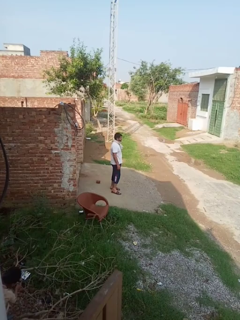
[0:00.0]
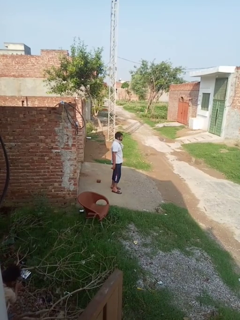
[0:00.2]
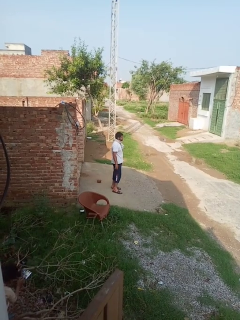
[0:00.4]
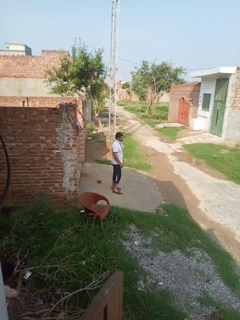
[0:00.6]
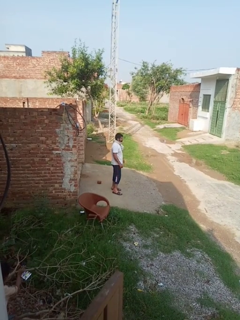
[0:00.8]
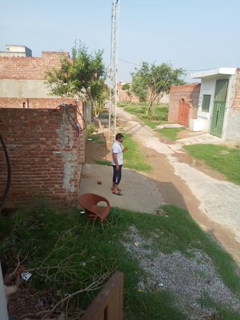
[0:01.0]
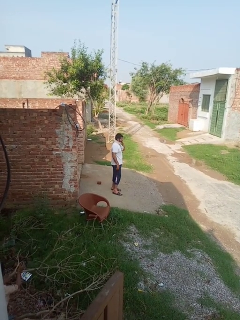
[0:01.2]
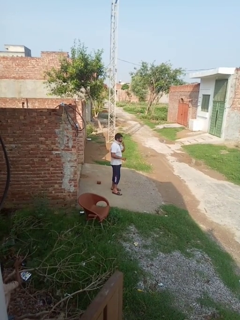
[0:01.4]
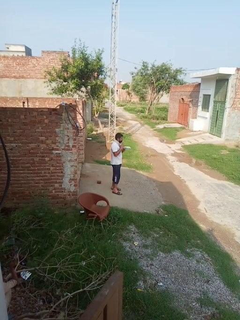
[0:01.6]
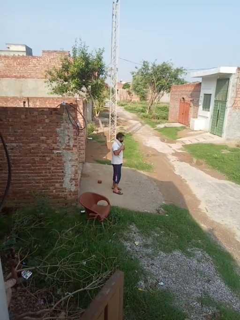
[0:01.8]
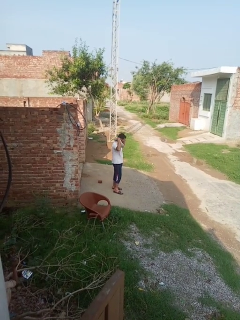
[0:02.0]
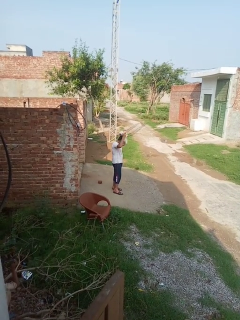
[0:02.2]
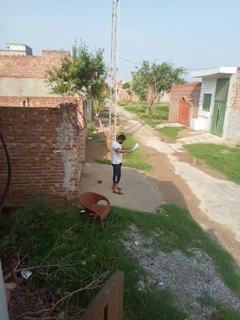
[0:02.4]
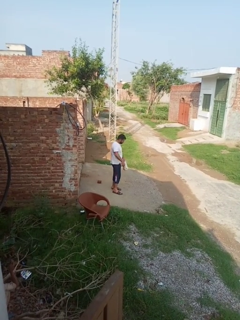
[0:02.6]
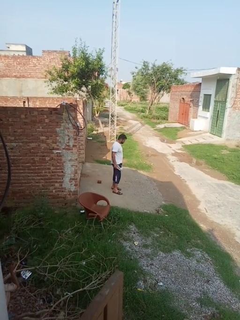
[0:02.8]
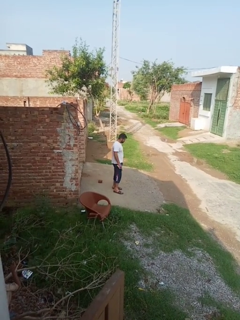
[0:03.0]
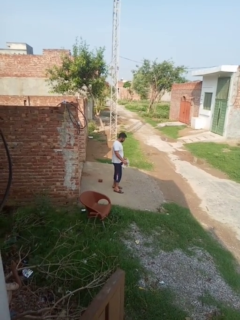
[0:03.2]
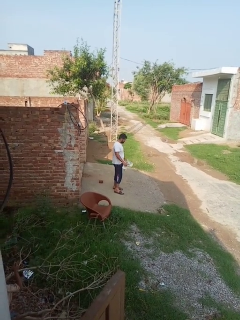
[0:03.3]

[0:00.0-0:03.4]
person takes off scarf

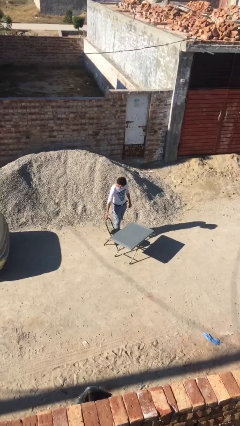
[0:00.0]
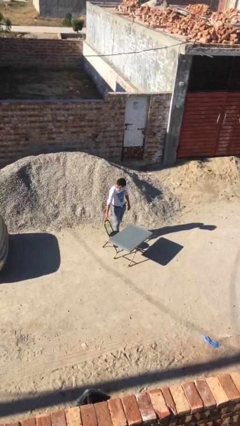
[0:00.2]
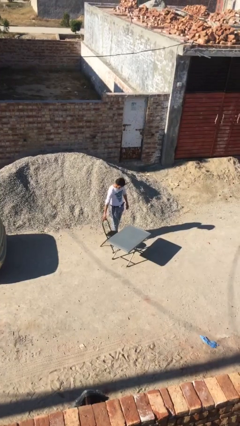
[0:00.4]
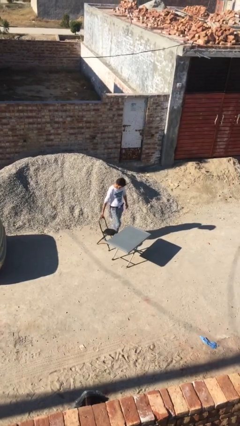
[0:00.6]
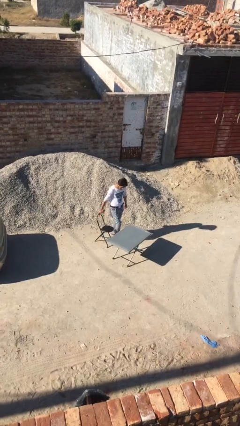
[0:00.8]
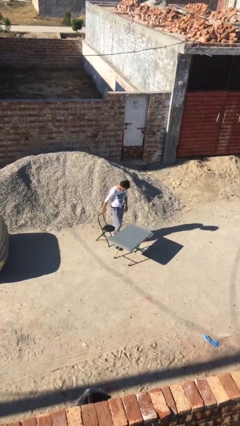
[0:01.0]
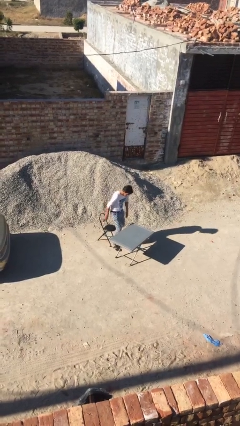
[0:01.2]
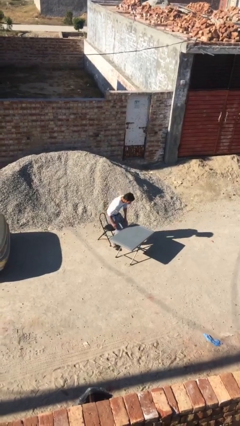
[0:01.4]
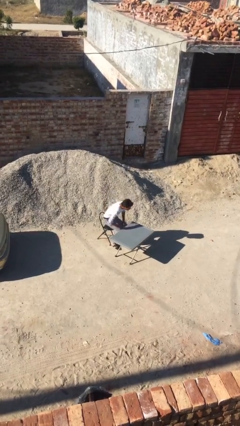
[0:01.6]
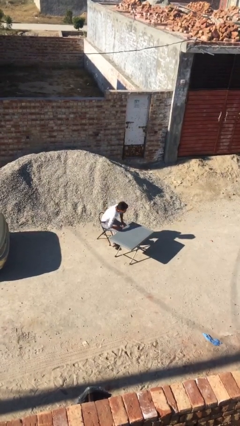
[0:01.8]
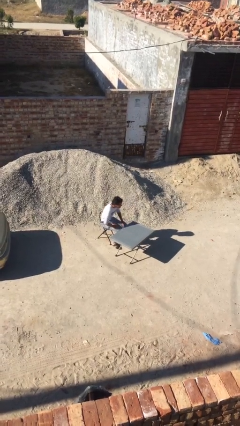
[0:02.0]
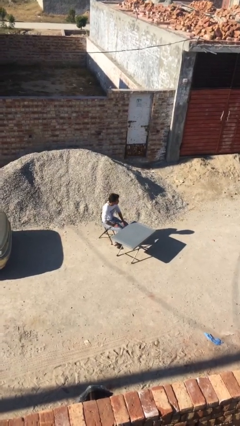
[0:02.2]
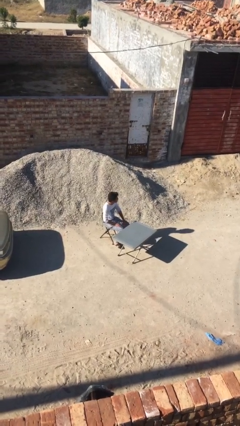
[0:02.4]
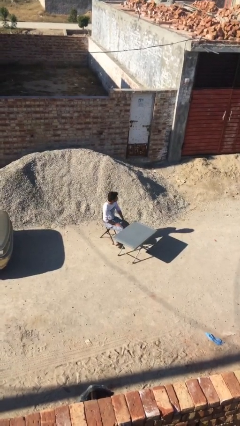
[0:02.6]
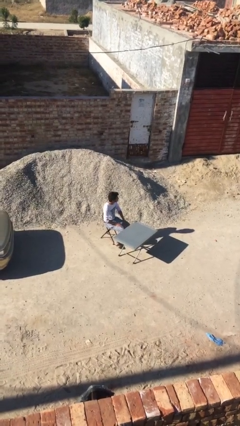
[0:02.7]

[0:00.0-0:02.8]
person sits down

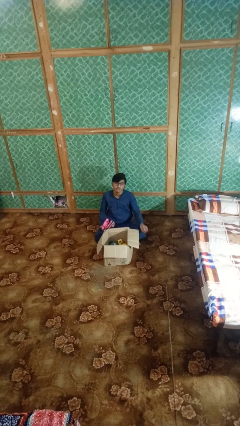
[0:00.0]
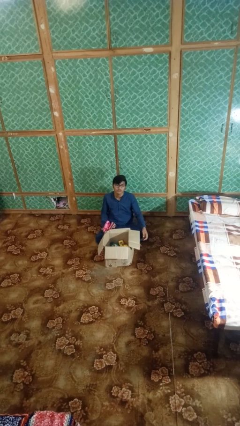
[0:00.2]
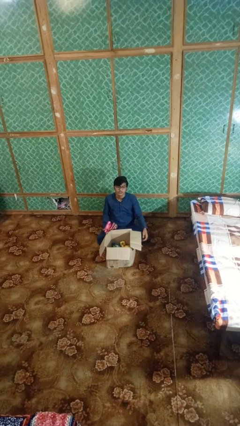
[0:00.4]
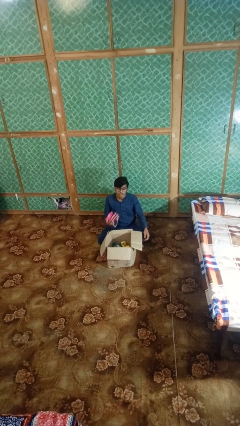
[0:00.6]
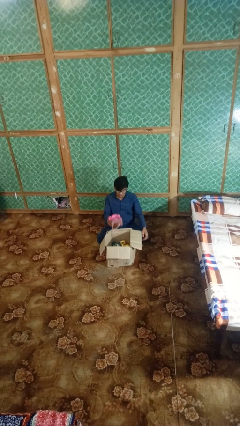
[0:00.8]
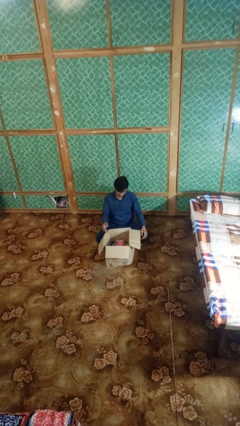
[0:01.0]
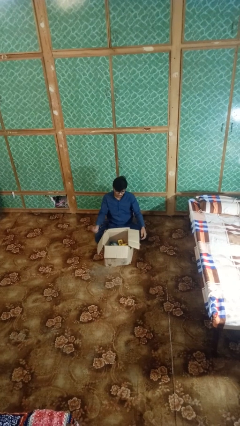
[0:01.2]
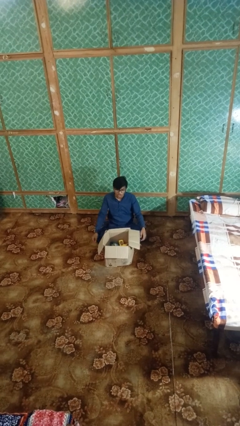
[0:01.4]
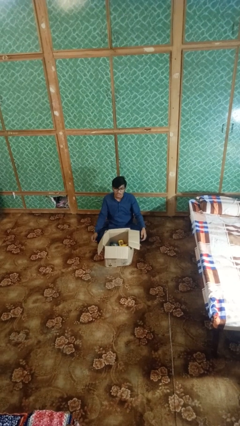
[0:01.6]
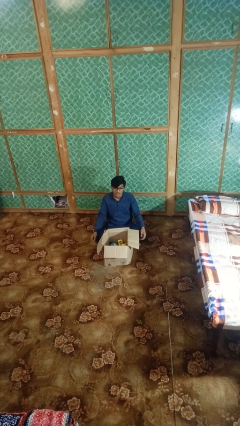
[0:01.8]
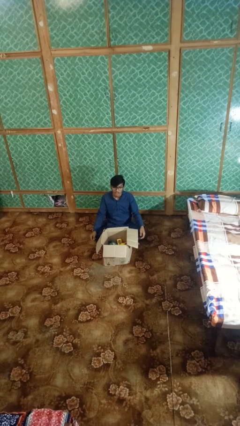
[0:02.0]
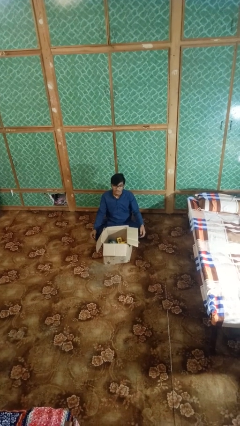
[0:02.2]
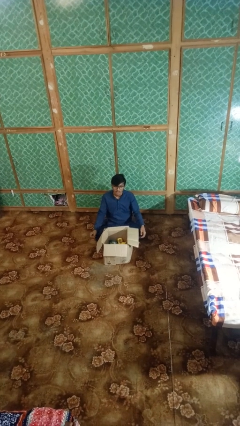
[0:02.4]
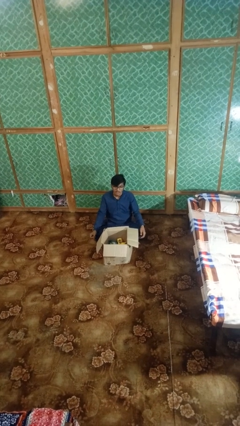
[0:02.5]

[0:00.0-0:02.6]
person puts object into box

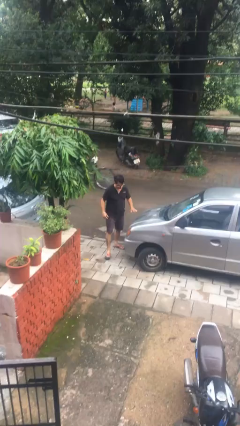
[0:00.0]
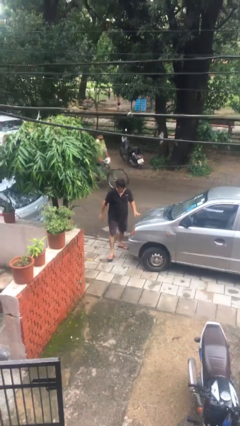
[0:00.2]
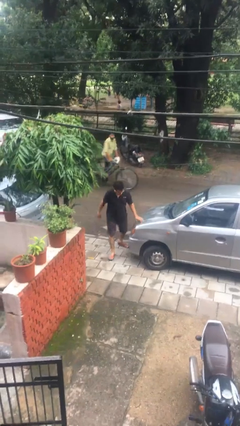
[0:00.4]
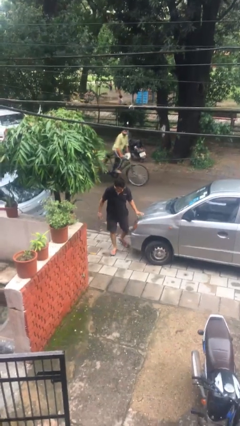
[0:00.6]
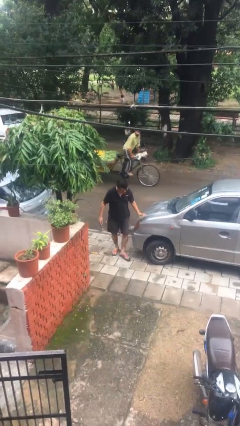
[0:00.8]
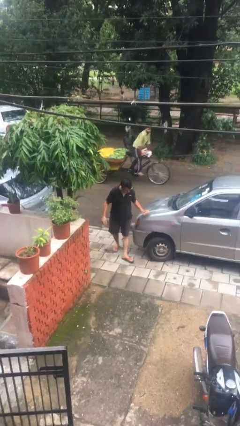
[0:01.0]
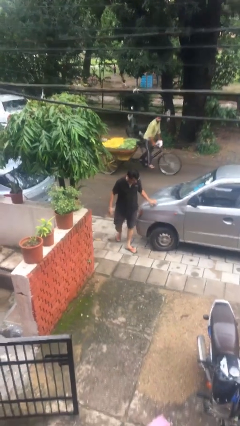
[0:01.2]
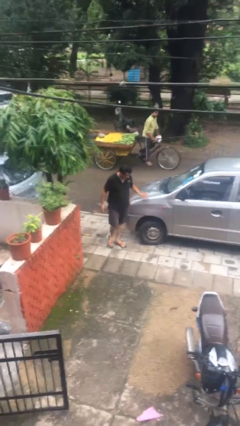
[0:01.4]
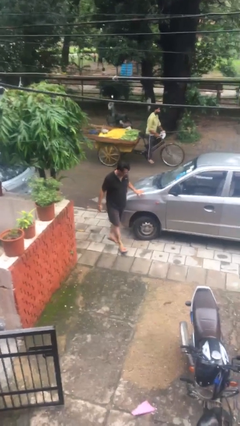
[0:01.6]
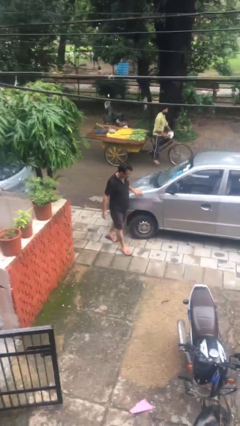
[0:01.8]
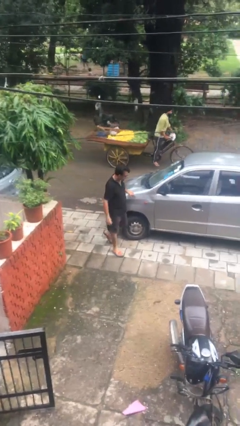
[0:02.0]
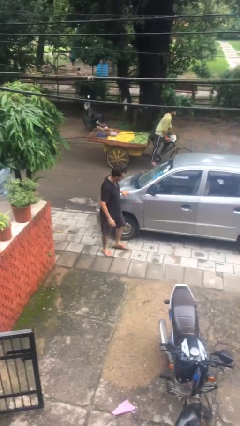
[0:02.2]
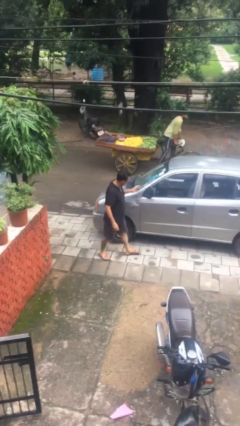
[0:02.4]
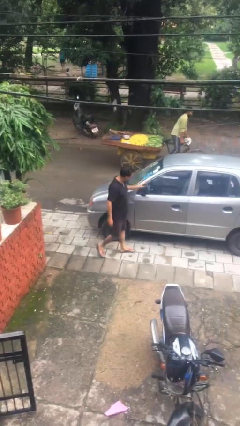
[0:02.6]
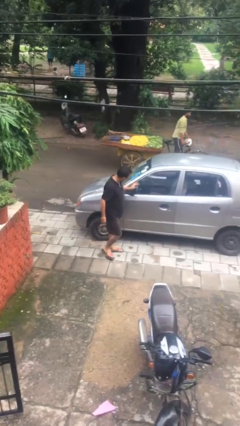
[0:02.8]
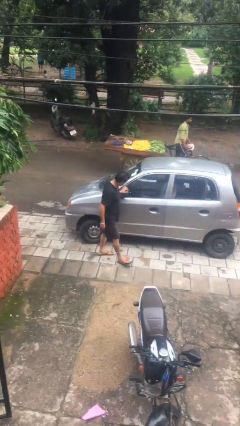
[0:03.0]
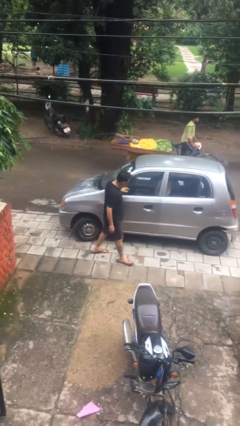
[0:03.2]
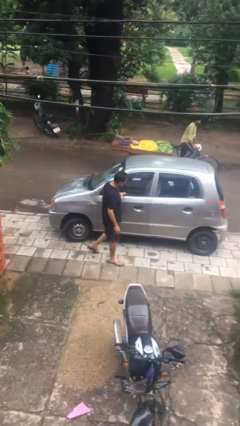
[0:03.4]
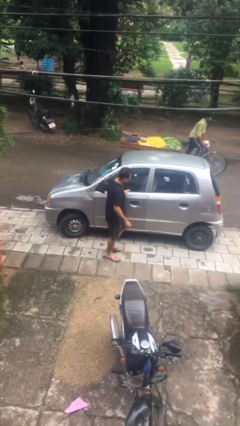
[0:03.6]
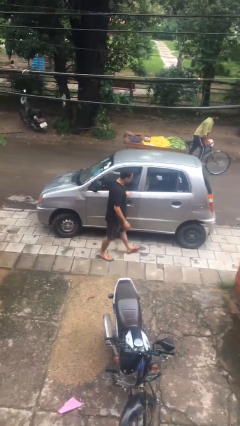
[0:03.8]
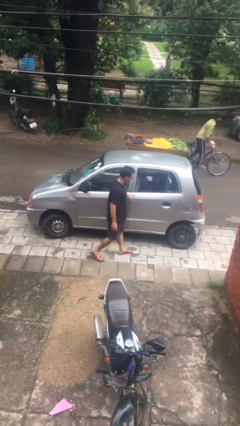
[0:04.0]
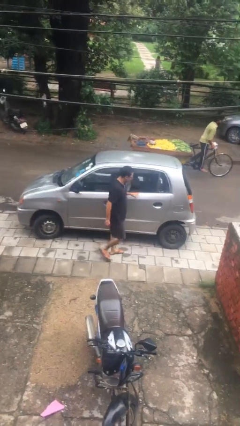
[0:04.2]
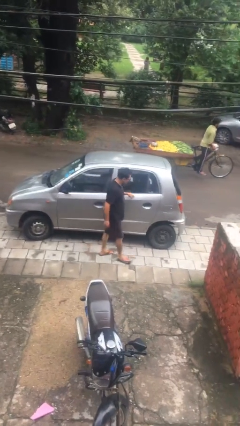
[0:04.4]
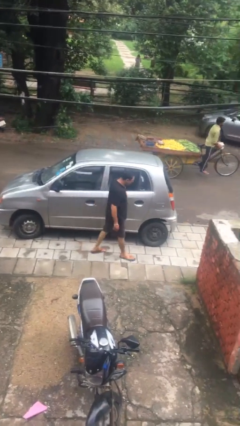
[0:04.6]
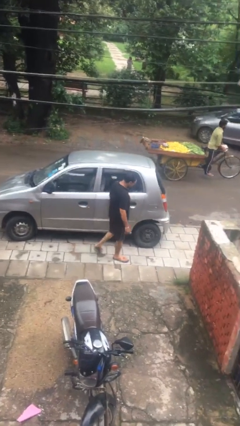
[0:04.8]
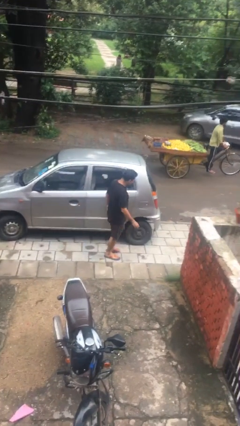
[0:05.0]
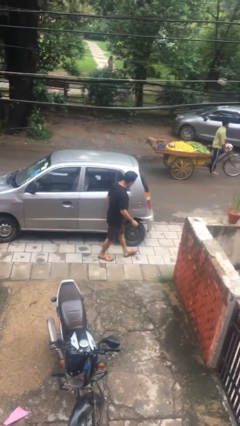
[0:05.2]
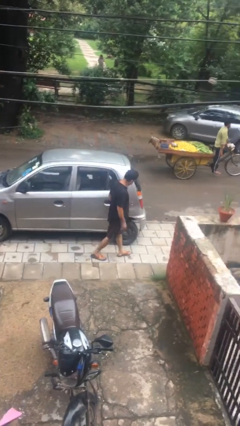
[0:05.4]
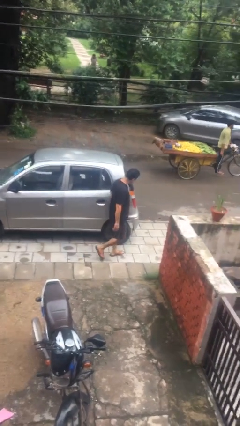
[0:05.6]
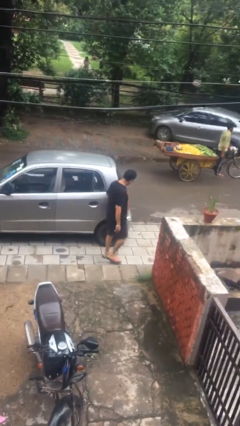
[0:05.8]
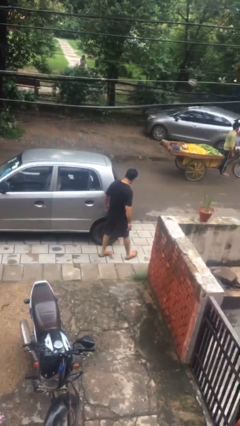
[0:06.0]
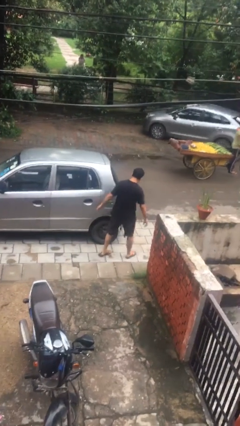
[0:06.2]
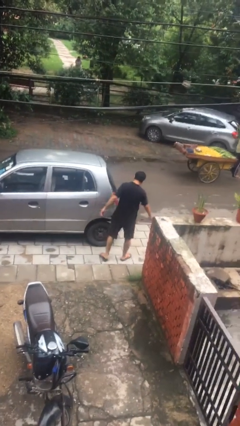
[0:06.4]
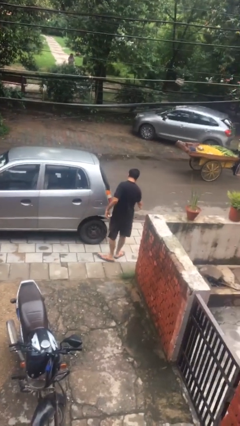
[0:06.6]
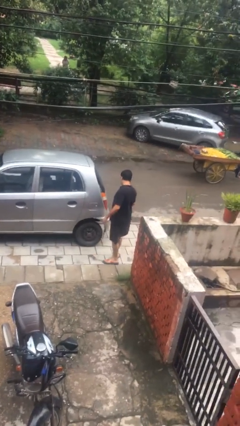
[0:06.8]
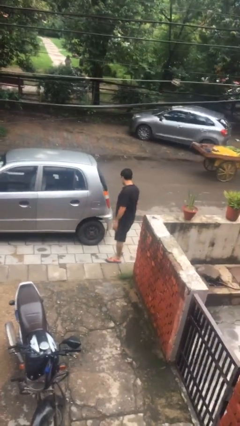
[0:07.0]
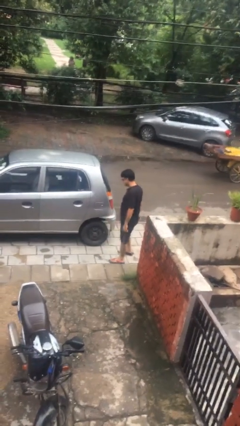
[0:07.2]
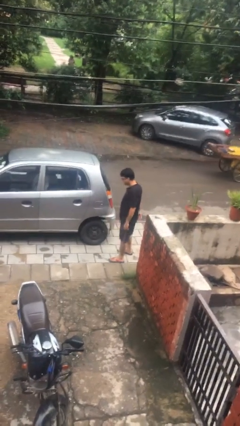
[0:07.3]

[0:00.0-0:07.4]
person walks around car

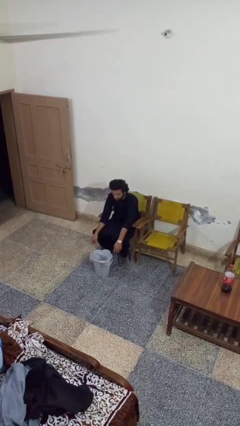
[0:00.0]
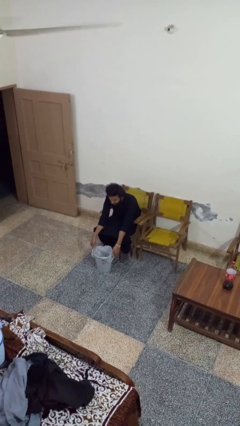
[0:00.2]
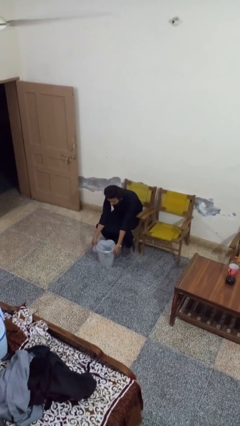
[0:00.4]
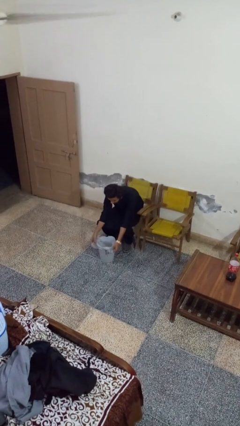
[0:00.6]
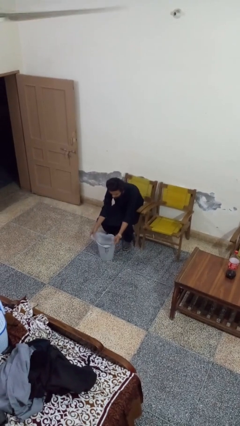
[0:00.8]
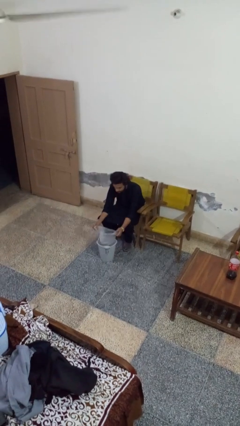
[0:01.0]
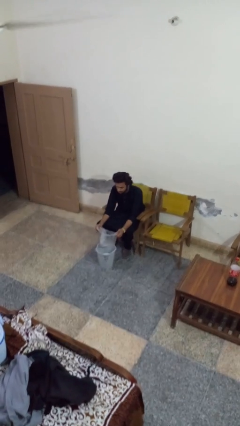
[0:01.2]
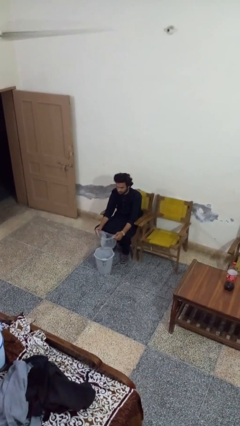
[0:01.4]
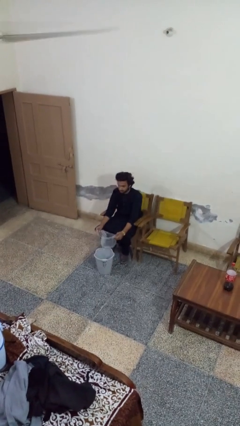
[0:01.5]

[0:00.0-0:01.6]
person removes trashbag from trashcan

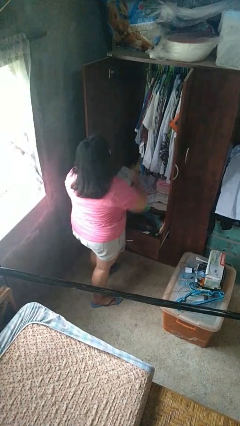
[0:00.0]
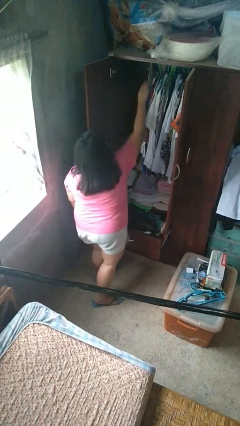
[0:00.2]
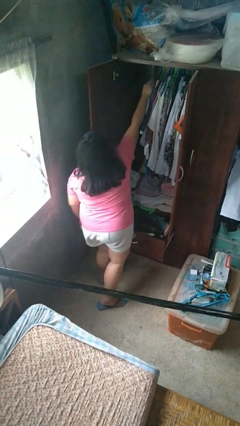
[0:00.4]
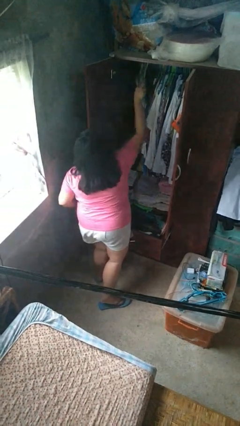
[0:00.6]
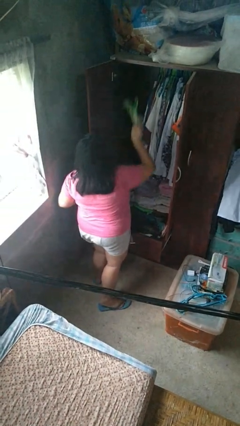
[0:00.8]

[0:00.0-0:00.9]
person takes clothes from closet
